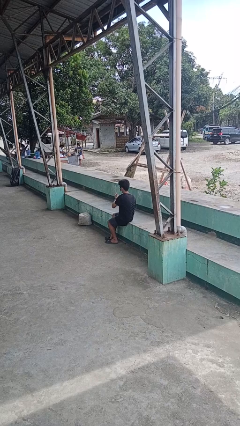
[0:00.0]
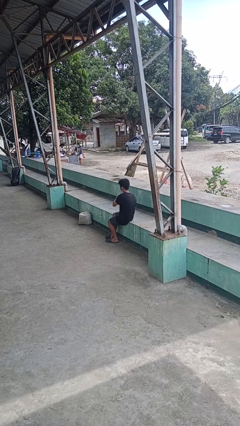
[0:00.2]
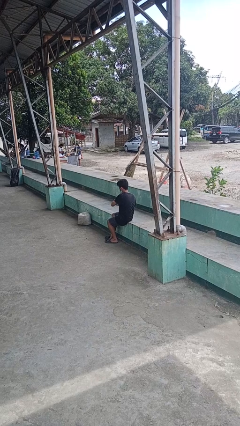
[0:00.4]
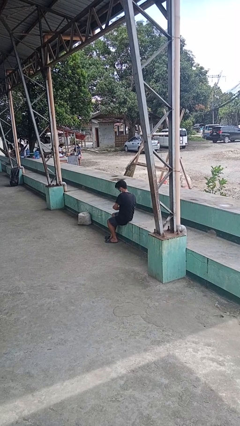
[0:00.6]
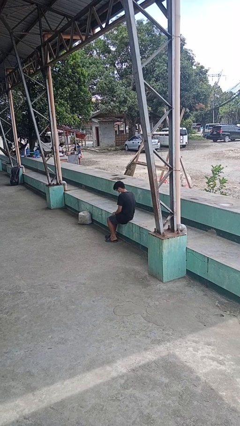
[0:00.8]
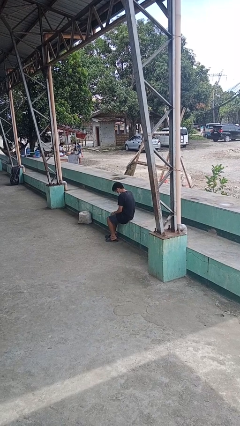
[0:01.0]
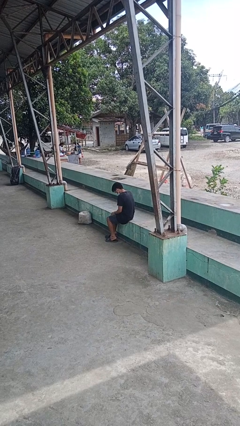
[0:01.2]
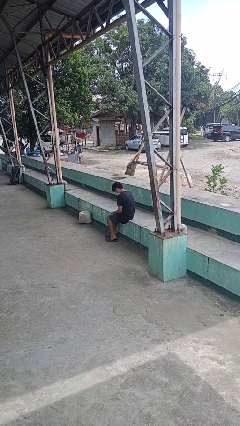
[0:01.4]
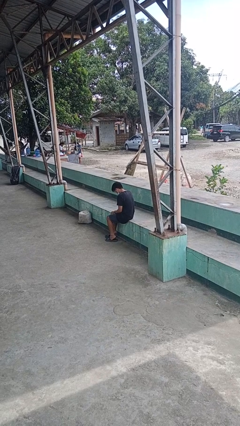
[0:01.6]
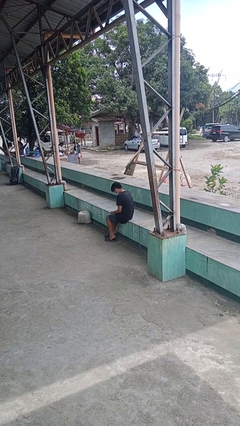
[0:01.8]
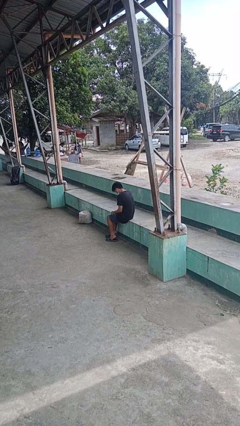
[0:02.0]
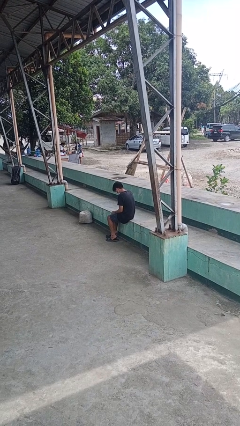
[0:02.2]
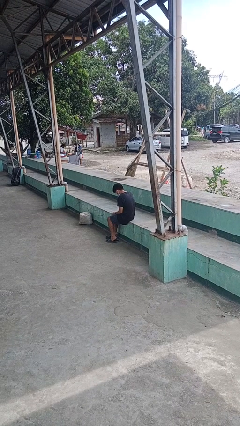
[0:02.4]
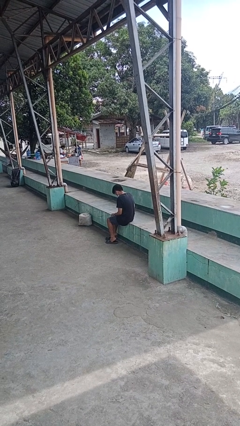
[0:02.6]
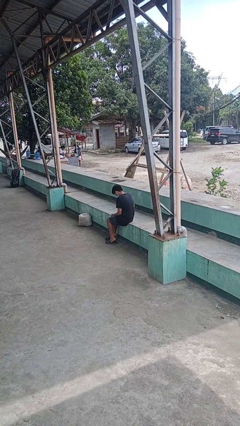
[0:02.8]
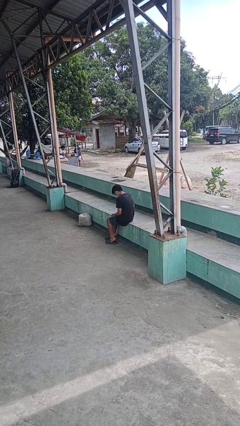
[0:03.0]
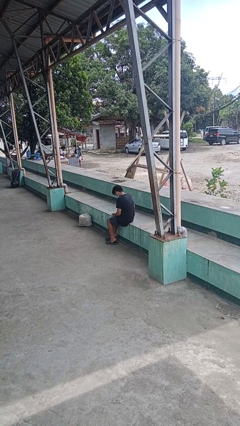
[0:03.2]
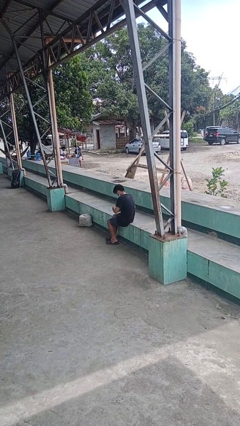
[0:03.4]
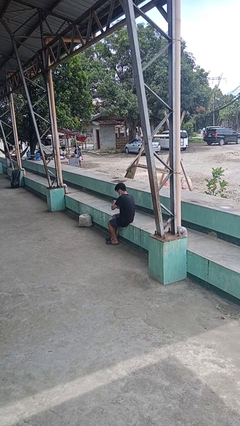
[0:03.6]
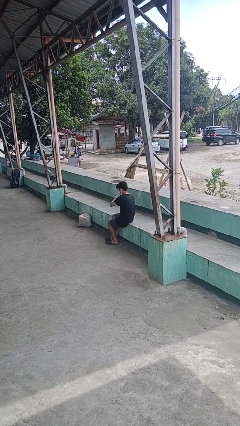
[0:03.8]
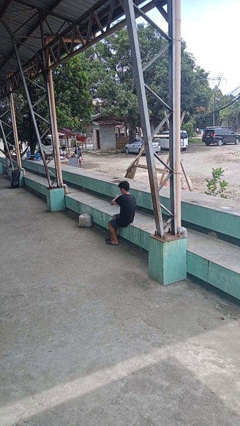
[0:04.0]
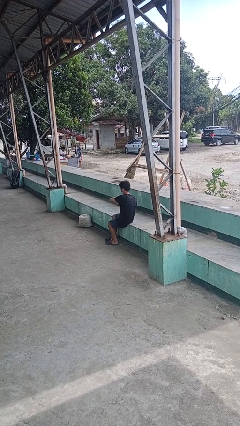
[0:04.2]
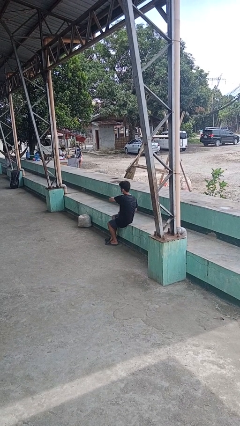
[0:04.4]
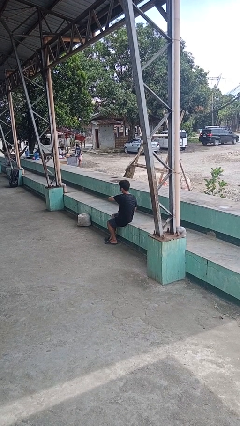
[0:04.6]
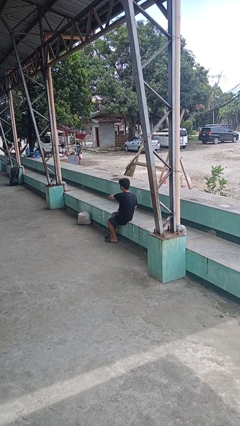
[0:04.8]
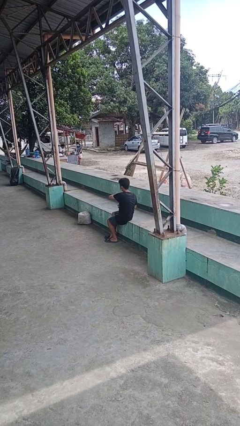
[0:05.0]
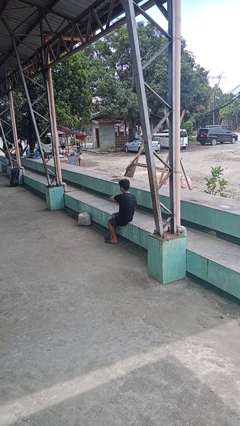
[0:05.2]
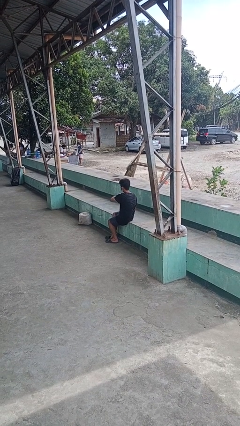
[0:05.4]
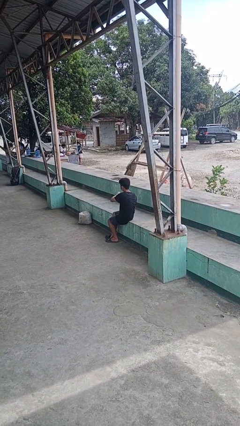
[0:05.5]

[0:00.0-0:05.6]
person puts on wristwatch

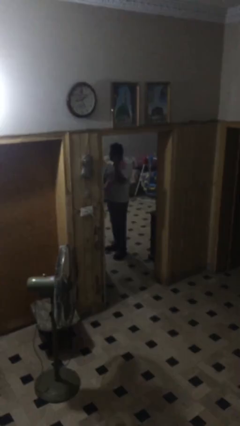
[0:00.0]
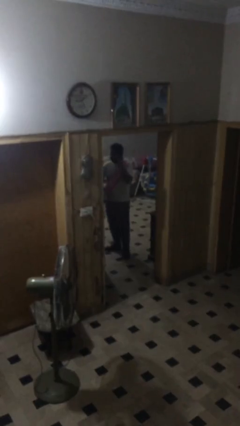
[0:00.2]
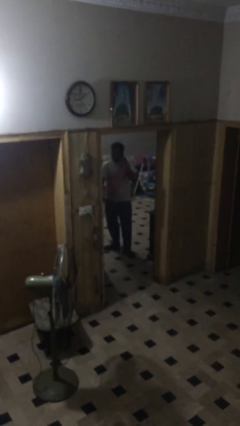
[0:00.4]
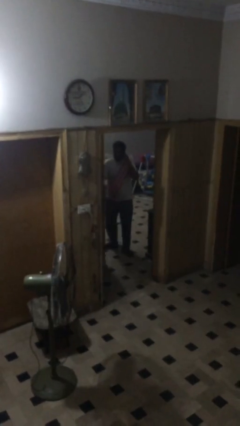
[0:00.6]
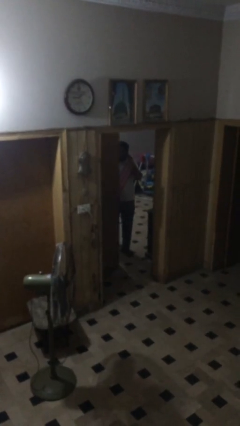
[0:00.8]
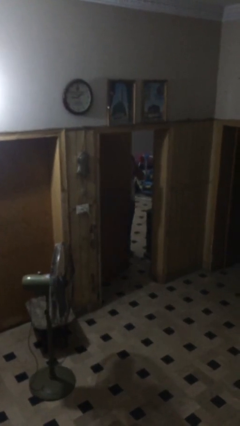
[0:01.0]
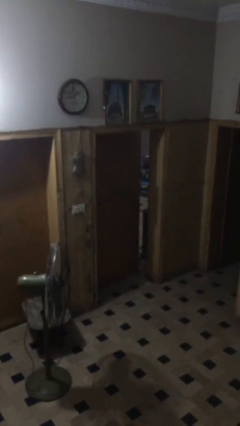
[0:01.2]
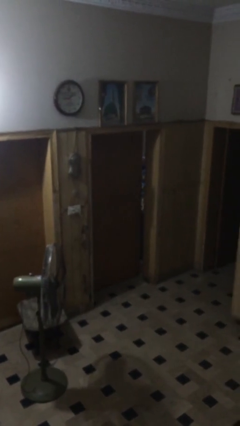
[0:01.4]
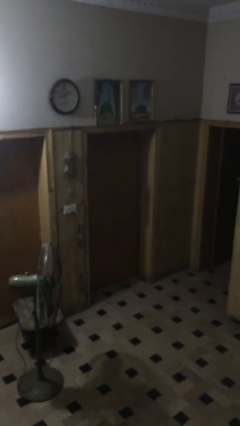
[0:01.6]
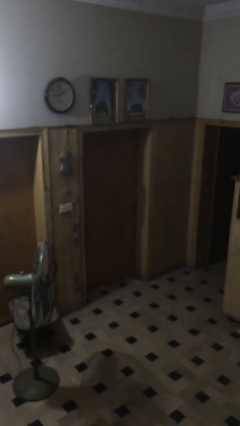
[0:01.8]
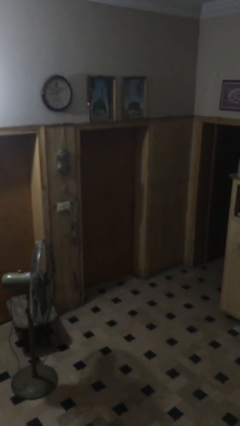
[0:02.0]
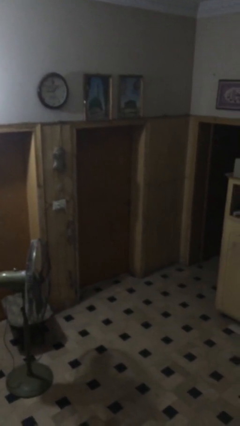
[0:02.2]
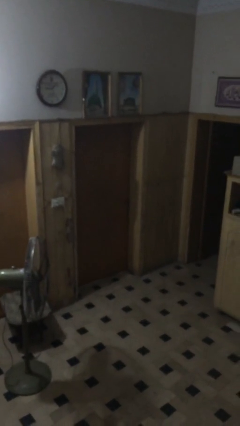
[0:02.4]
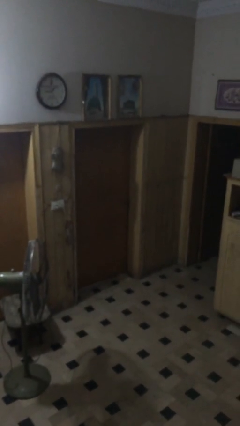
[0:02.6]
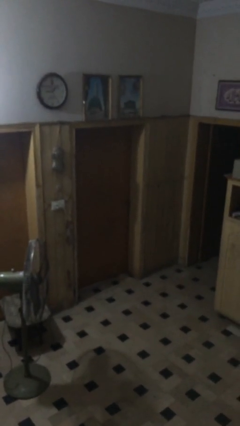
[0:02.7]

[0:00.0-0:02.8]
person closes facility door

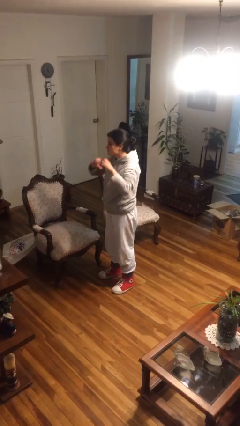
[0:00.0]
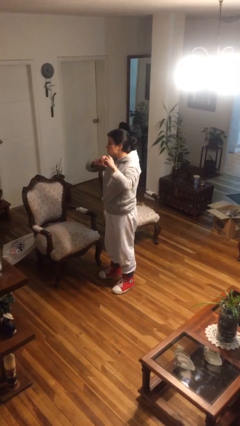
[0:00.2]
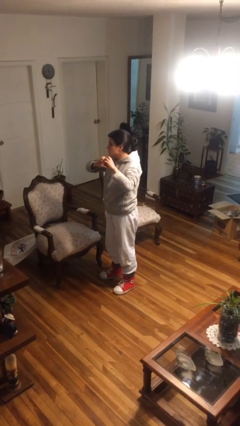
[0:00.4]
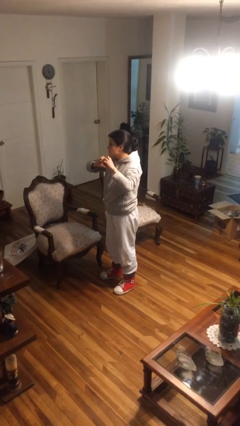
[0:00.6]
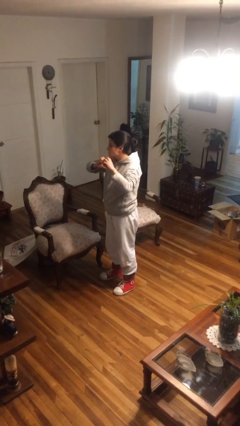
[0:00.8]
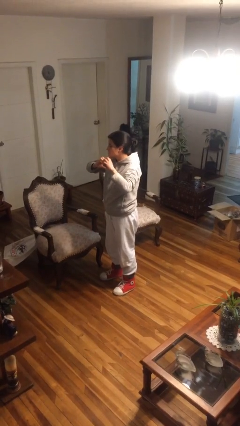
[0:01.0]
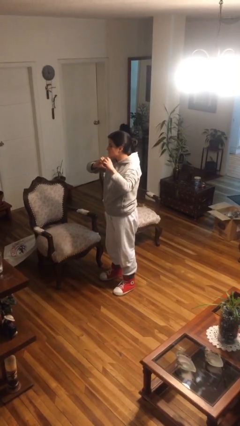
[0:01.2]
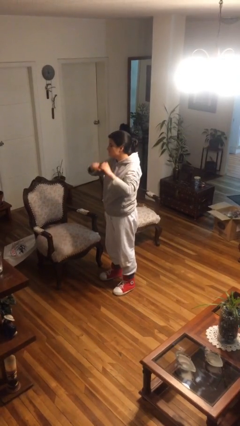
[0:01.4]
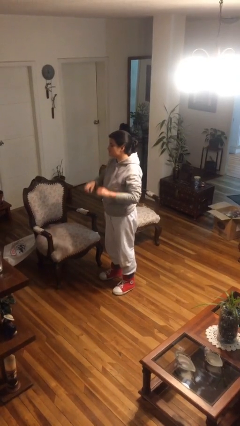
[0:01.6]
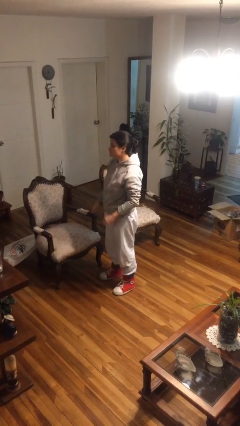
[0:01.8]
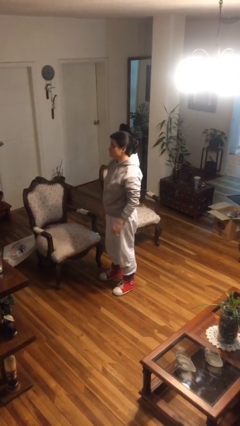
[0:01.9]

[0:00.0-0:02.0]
person gestures heart

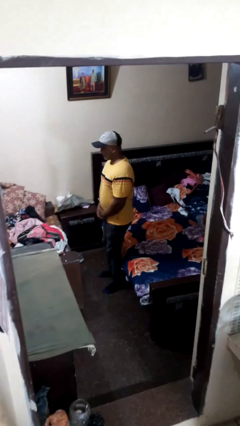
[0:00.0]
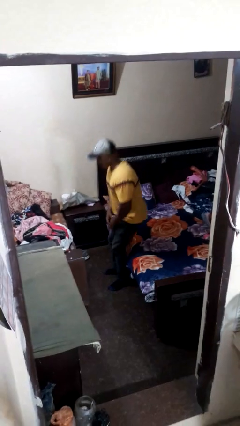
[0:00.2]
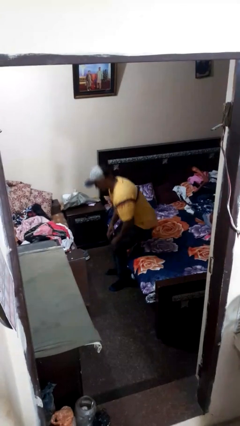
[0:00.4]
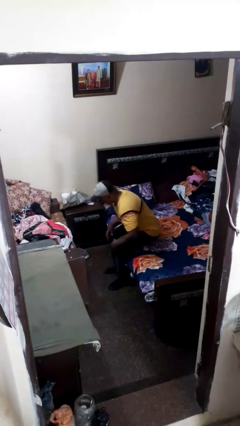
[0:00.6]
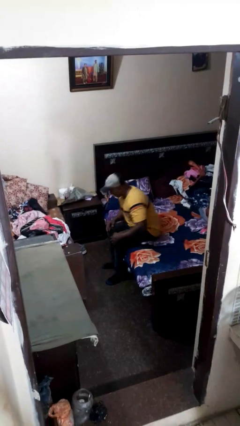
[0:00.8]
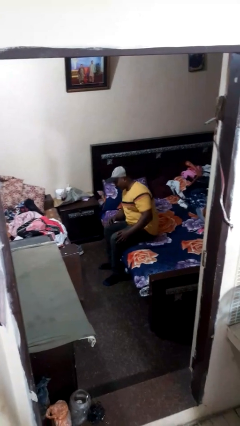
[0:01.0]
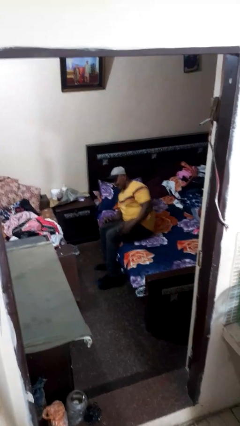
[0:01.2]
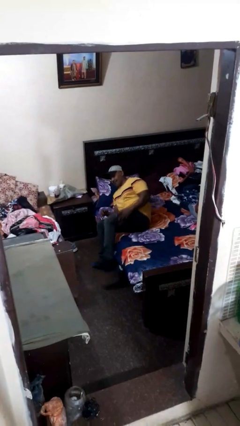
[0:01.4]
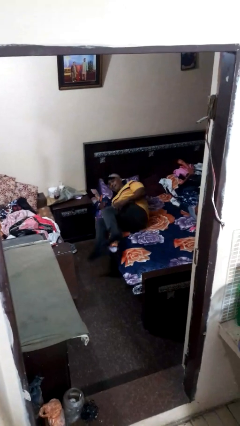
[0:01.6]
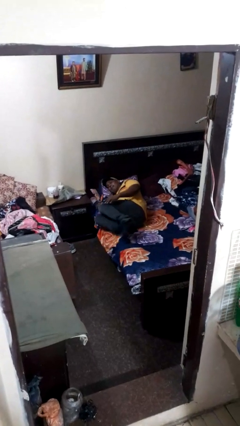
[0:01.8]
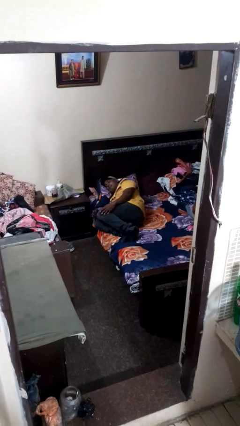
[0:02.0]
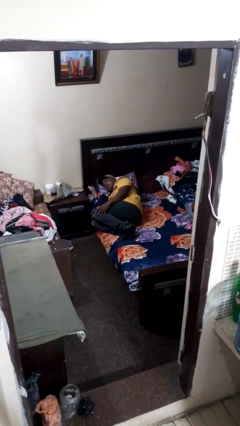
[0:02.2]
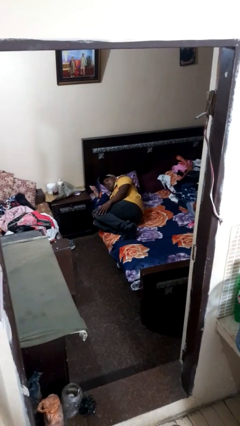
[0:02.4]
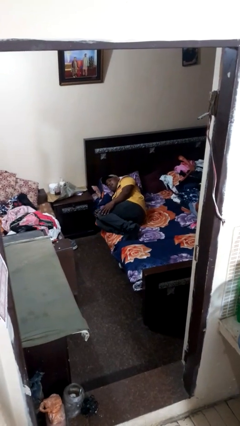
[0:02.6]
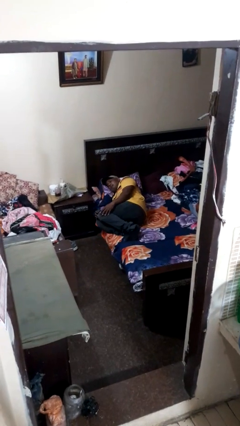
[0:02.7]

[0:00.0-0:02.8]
person lies down on bed

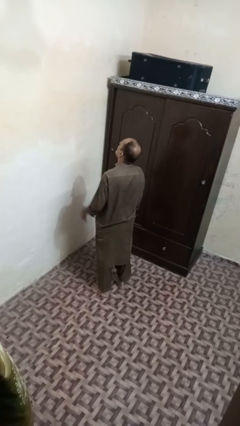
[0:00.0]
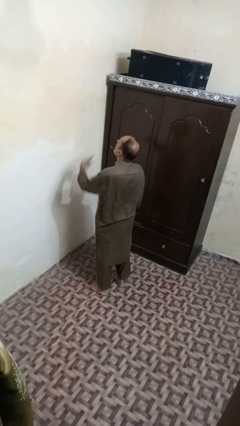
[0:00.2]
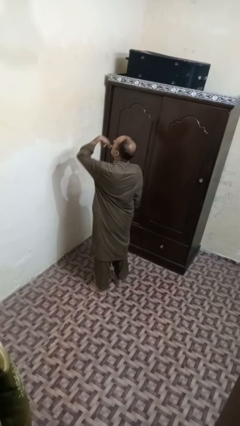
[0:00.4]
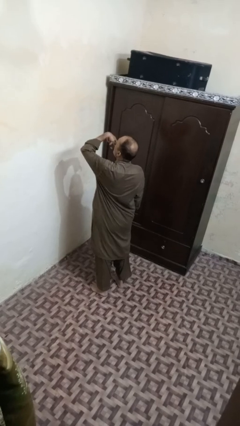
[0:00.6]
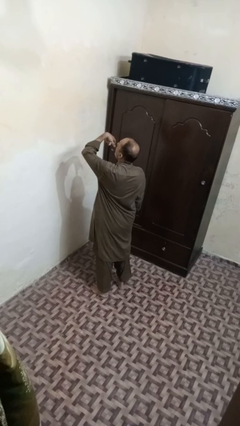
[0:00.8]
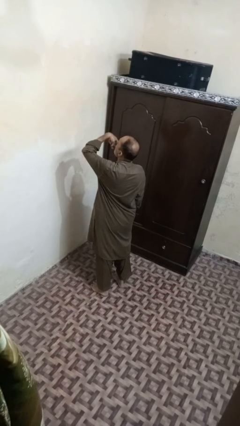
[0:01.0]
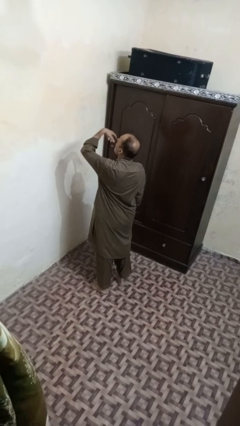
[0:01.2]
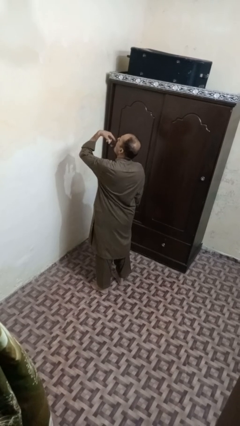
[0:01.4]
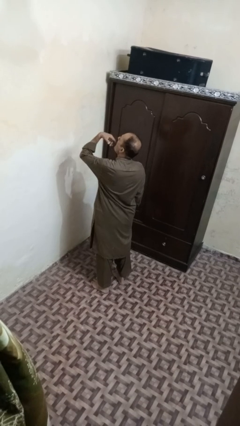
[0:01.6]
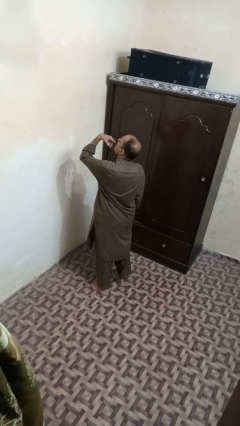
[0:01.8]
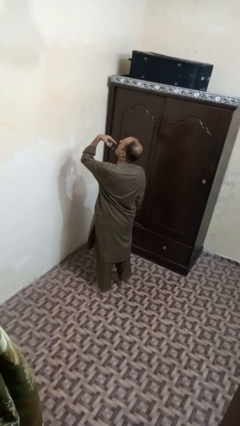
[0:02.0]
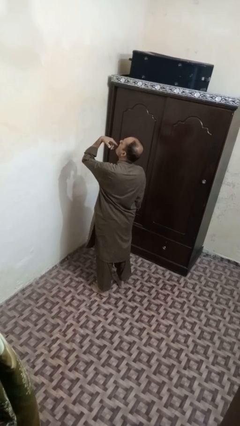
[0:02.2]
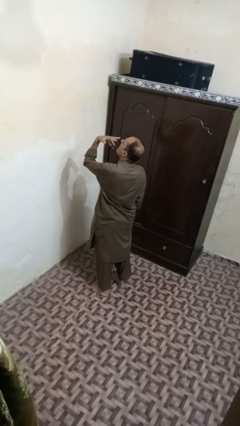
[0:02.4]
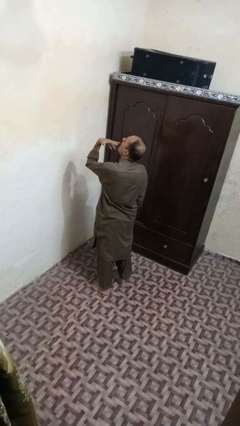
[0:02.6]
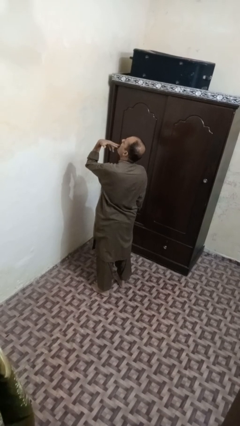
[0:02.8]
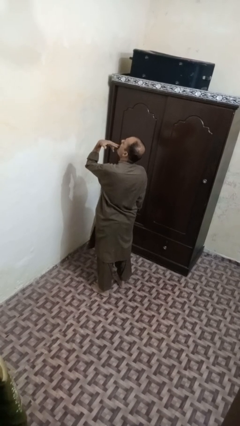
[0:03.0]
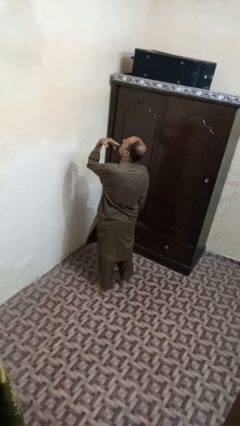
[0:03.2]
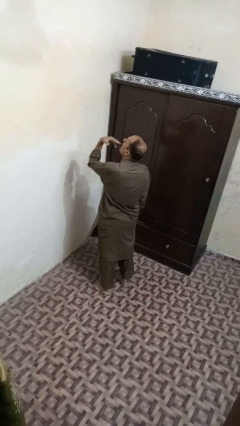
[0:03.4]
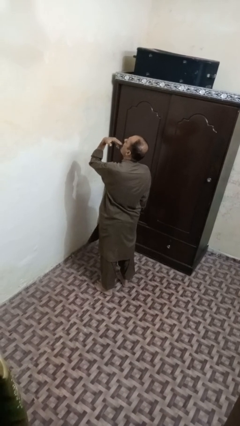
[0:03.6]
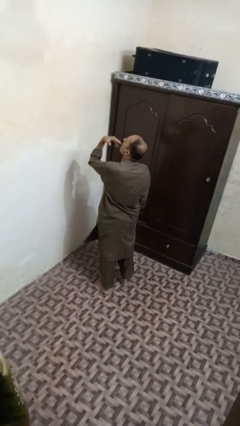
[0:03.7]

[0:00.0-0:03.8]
person licks fingers

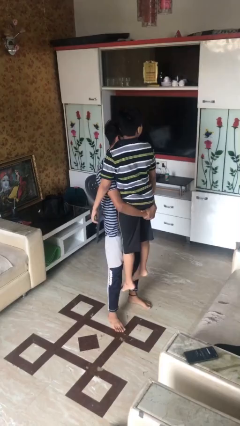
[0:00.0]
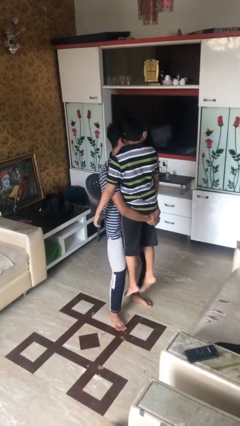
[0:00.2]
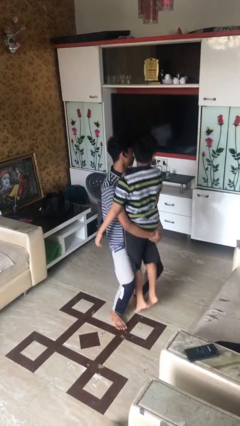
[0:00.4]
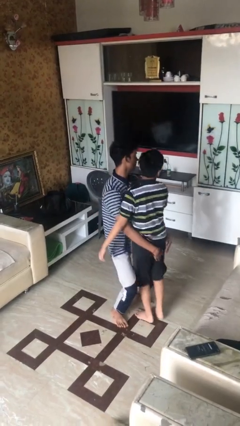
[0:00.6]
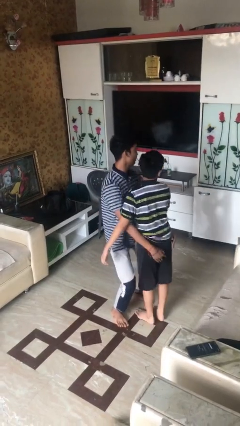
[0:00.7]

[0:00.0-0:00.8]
person puts down person
